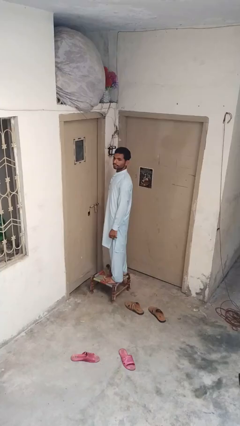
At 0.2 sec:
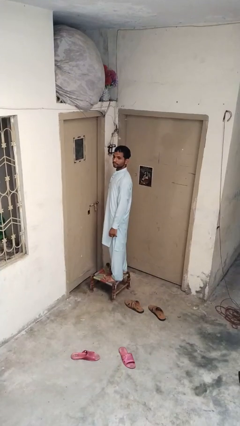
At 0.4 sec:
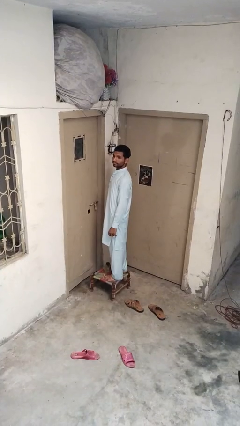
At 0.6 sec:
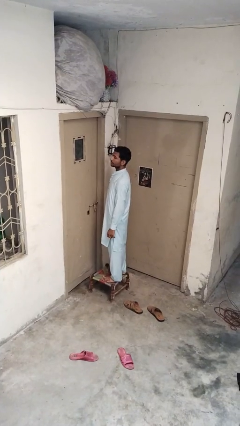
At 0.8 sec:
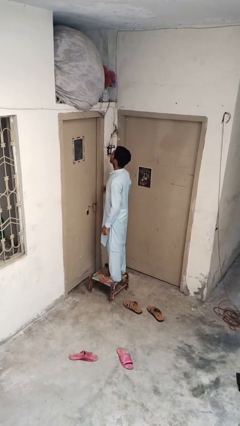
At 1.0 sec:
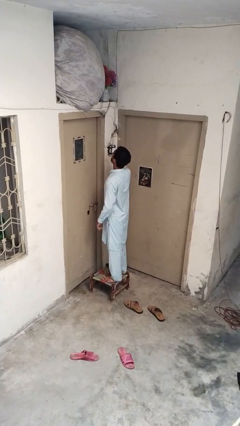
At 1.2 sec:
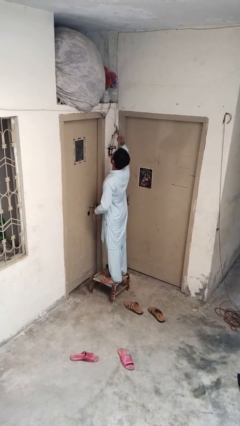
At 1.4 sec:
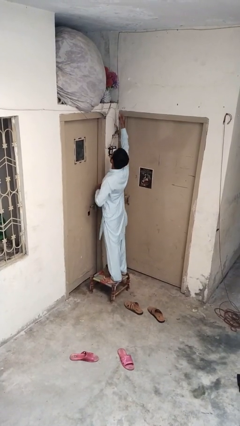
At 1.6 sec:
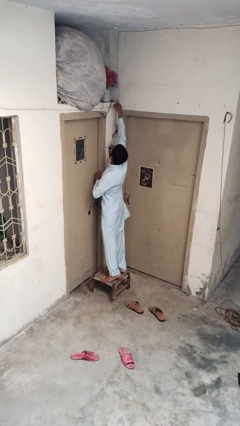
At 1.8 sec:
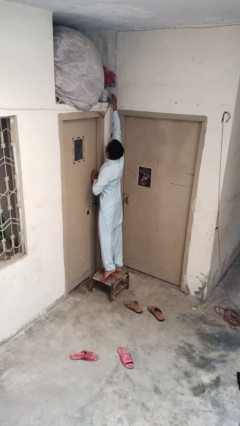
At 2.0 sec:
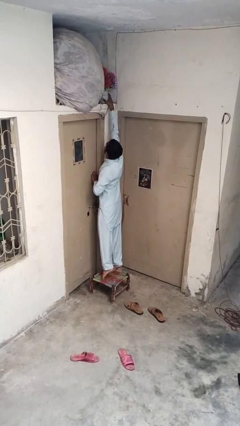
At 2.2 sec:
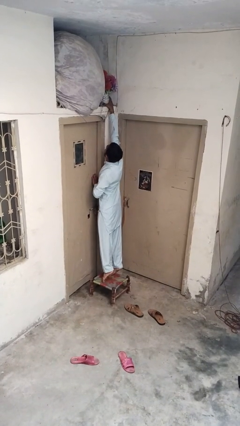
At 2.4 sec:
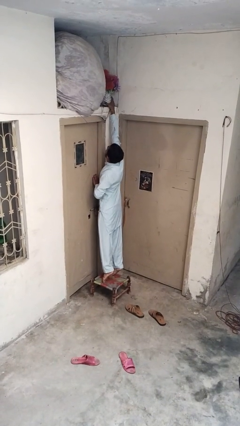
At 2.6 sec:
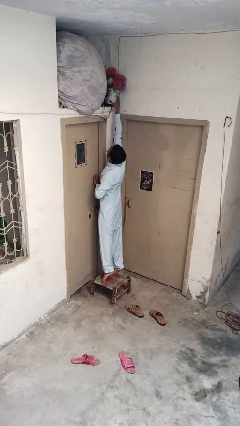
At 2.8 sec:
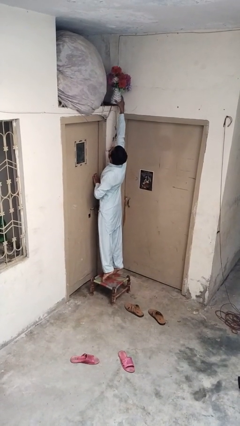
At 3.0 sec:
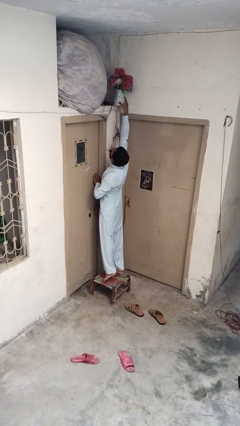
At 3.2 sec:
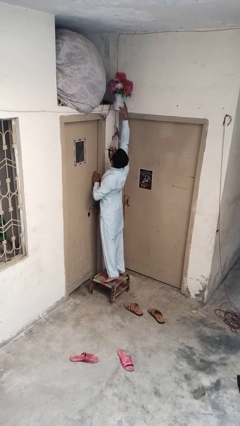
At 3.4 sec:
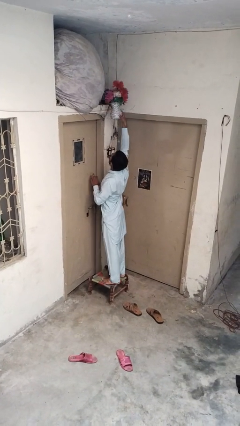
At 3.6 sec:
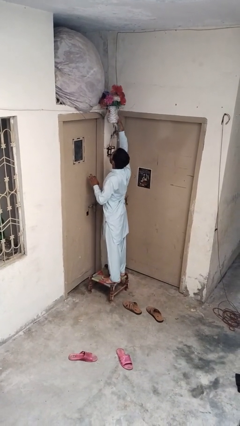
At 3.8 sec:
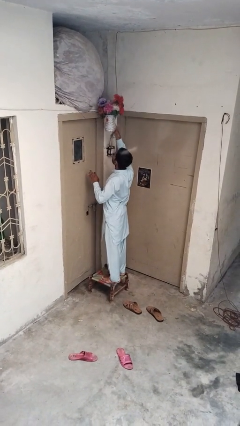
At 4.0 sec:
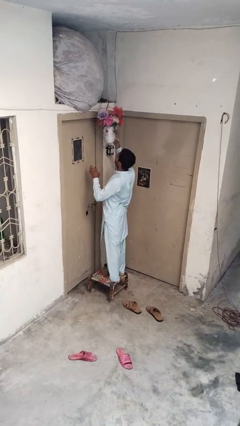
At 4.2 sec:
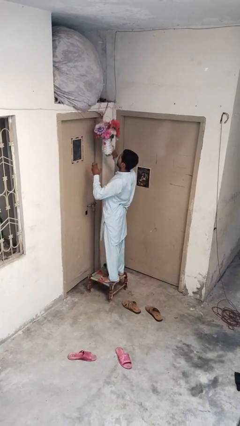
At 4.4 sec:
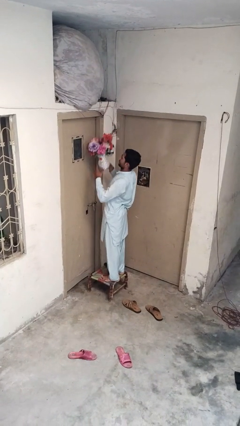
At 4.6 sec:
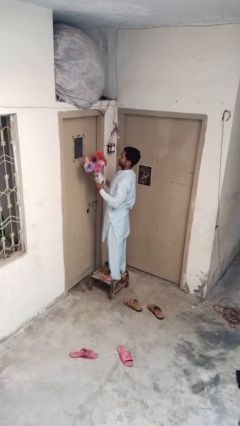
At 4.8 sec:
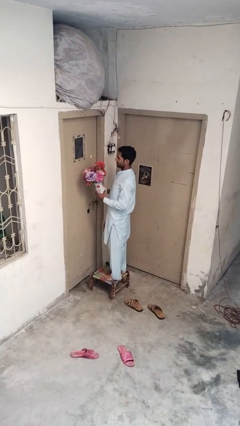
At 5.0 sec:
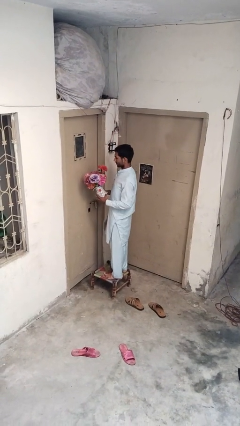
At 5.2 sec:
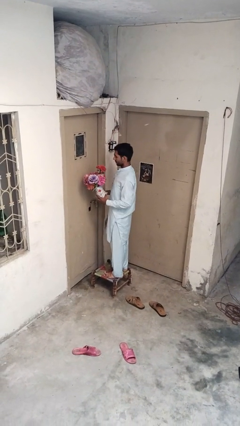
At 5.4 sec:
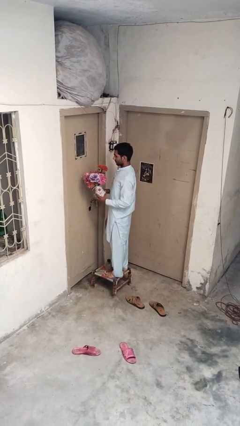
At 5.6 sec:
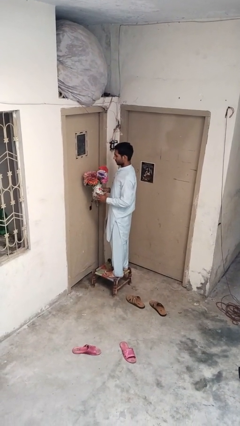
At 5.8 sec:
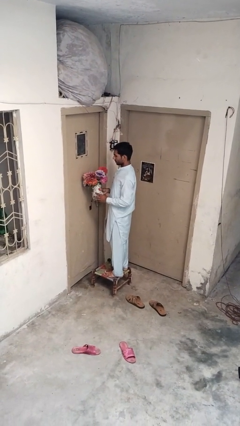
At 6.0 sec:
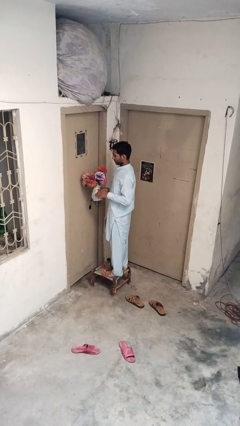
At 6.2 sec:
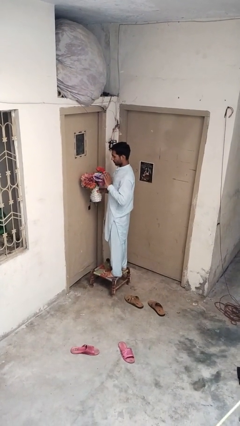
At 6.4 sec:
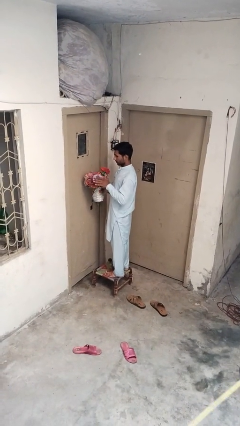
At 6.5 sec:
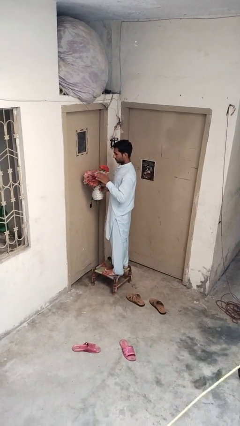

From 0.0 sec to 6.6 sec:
person picks up object from shelf

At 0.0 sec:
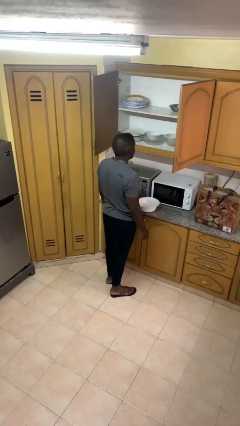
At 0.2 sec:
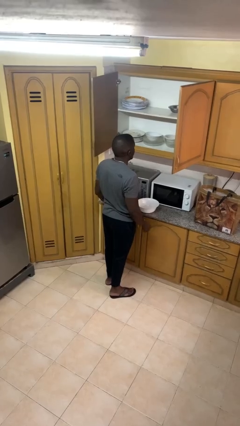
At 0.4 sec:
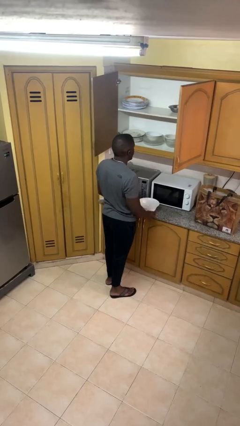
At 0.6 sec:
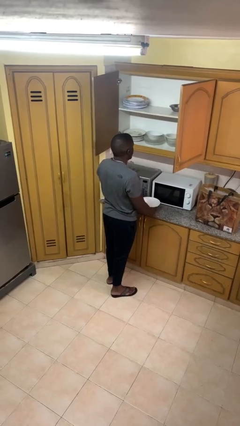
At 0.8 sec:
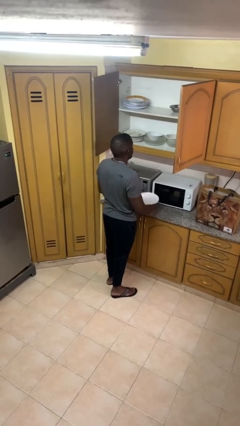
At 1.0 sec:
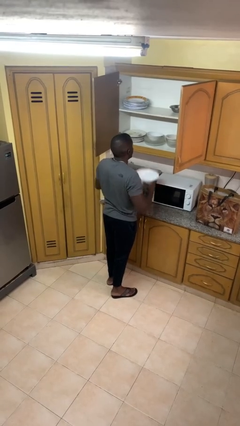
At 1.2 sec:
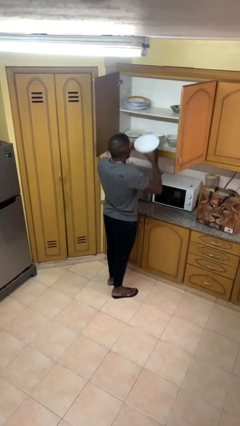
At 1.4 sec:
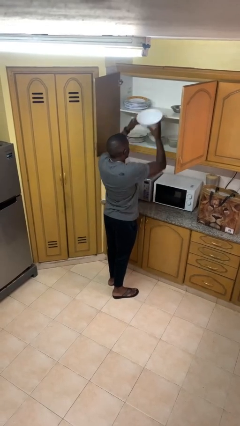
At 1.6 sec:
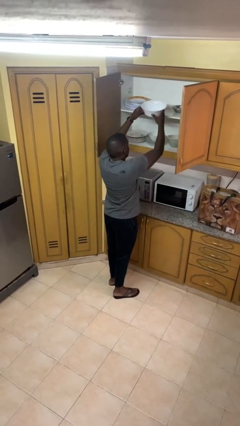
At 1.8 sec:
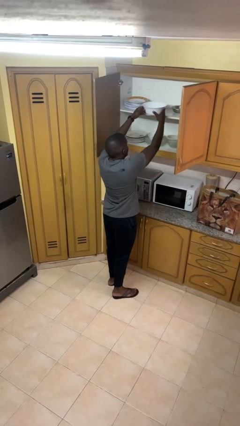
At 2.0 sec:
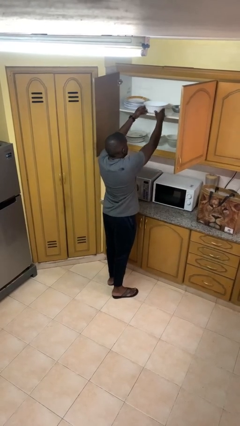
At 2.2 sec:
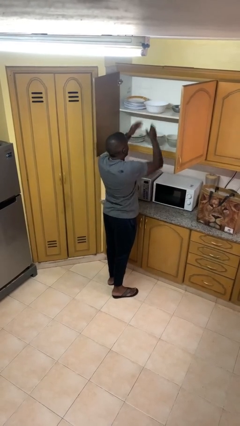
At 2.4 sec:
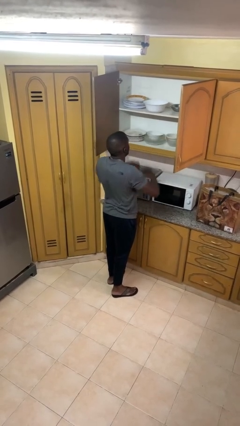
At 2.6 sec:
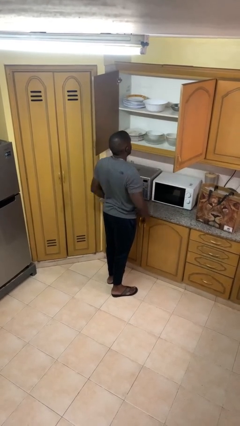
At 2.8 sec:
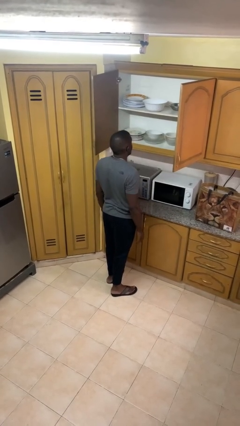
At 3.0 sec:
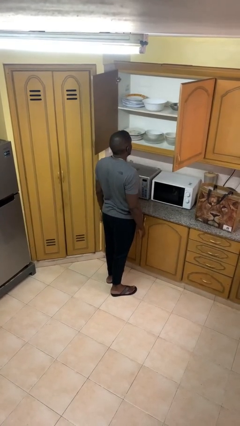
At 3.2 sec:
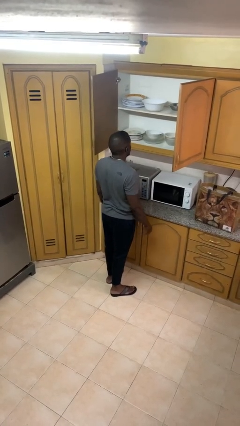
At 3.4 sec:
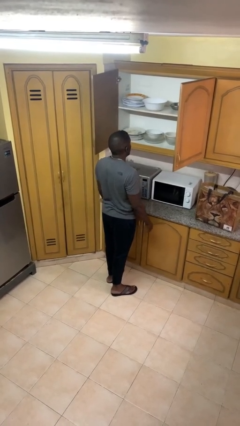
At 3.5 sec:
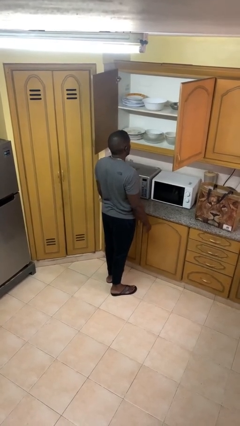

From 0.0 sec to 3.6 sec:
person puts object in cabinet

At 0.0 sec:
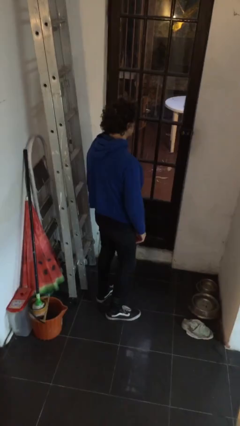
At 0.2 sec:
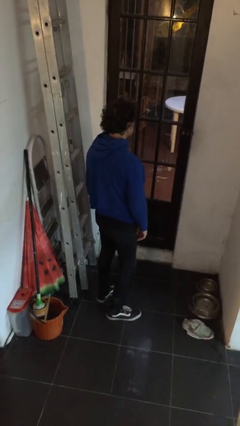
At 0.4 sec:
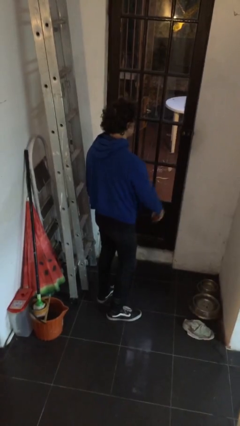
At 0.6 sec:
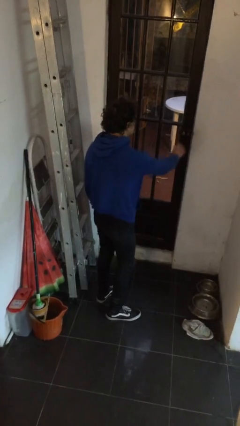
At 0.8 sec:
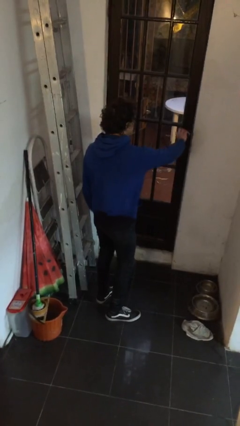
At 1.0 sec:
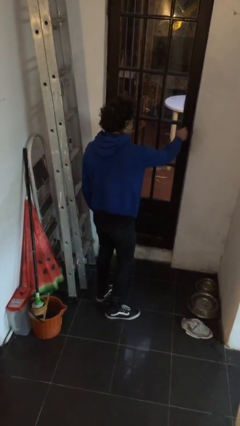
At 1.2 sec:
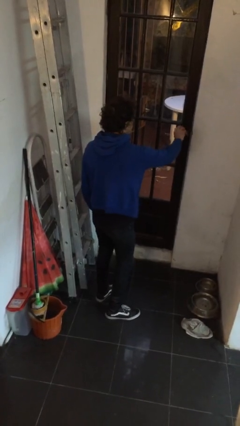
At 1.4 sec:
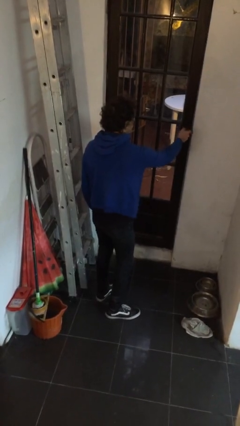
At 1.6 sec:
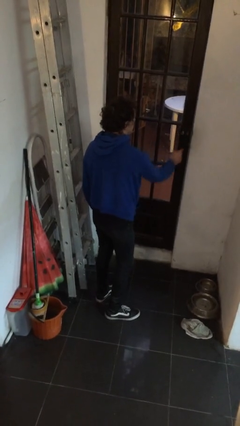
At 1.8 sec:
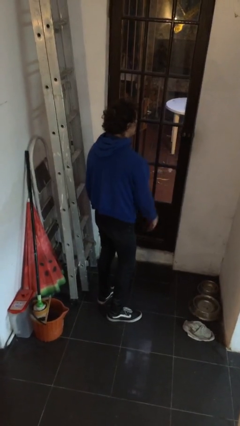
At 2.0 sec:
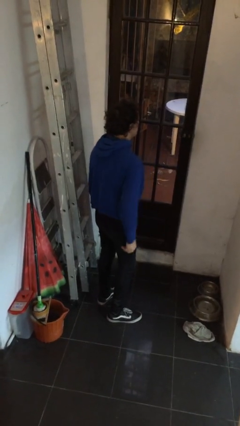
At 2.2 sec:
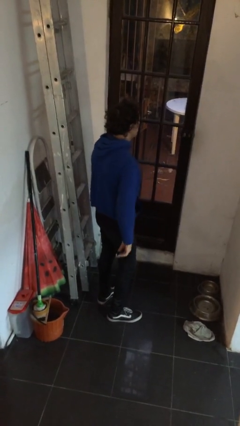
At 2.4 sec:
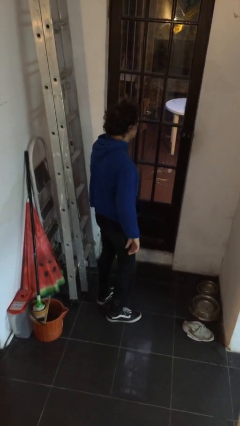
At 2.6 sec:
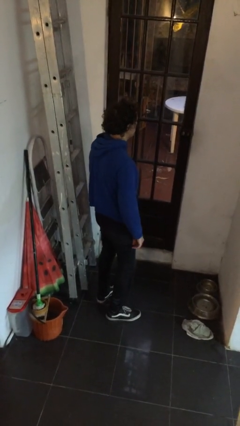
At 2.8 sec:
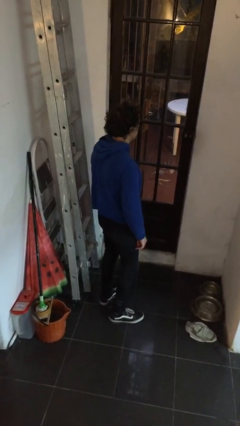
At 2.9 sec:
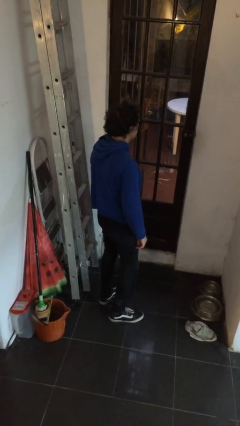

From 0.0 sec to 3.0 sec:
person locks door with keys

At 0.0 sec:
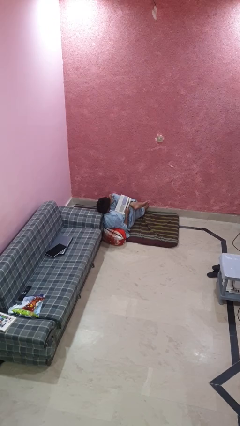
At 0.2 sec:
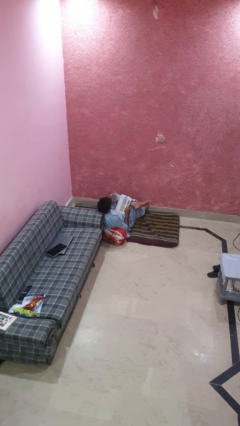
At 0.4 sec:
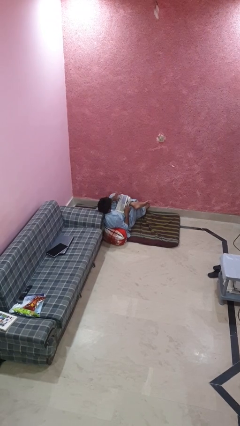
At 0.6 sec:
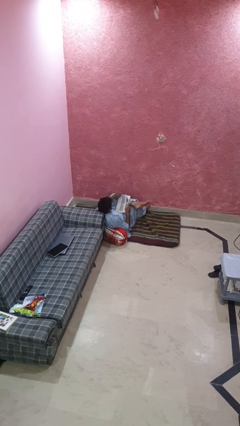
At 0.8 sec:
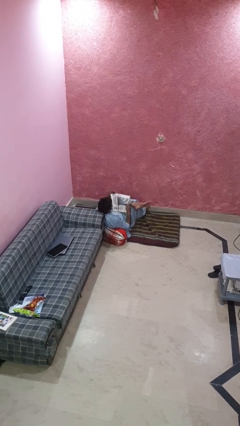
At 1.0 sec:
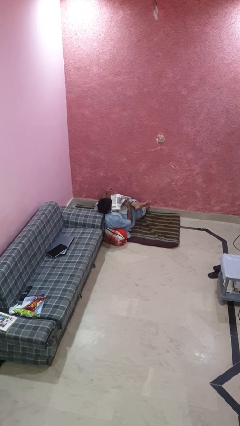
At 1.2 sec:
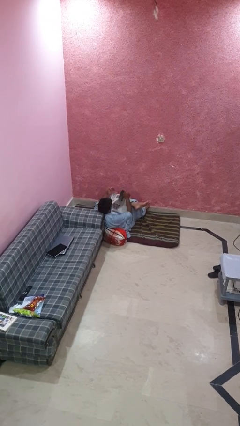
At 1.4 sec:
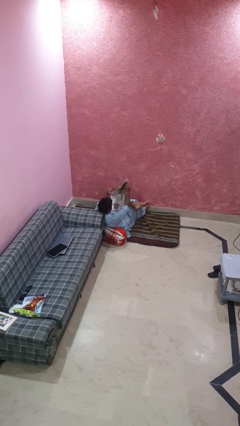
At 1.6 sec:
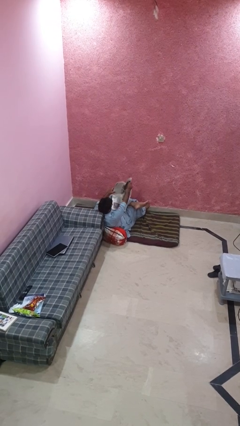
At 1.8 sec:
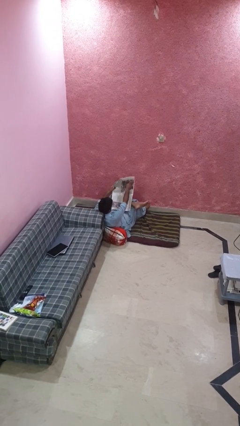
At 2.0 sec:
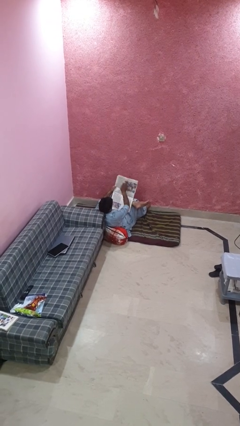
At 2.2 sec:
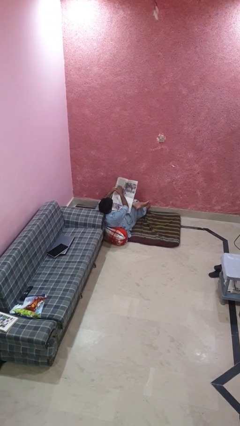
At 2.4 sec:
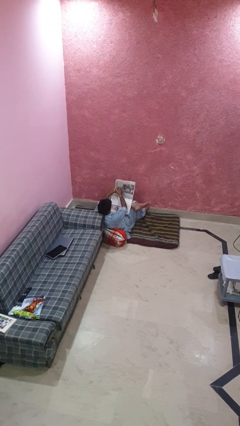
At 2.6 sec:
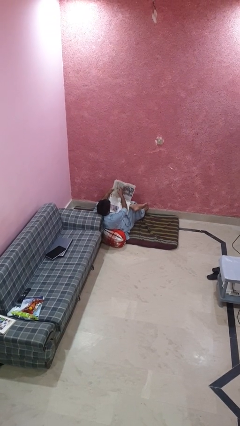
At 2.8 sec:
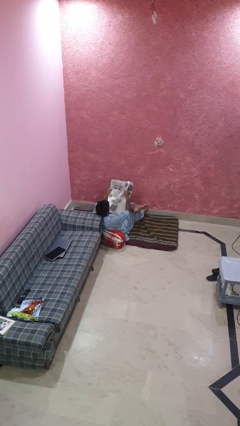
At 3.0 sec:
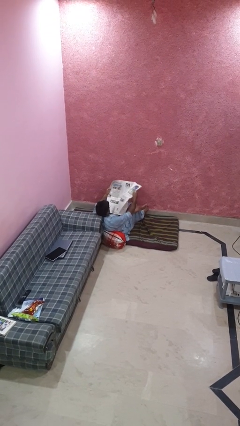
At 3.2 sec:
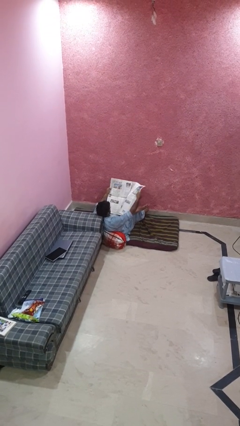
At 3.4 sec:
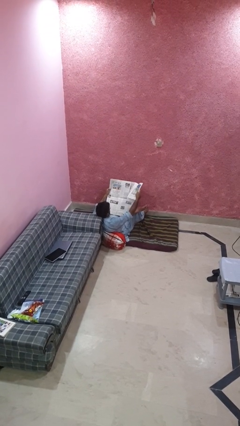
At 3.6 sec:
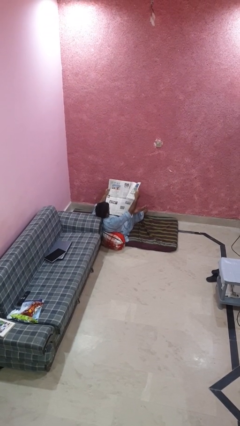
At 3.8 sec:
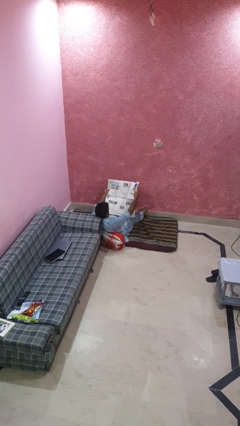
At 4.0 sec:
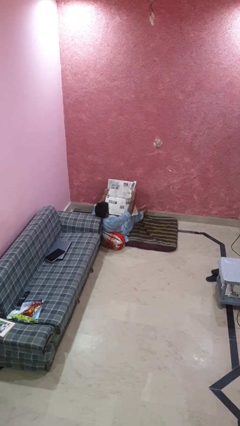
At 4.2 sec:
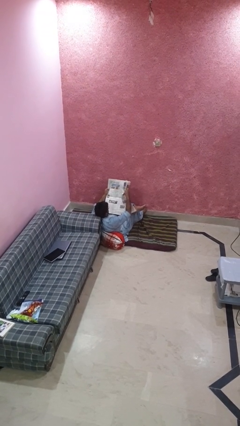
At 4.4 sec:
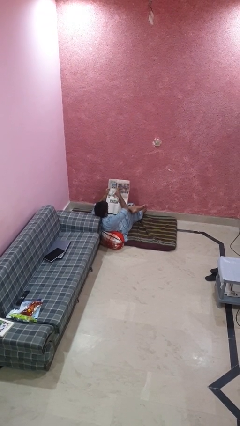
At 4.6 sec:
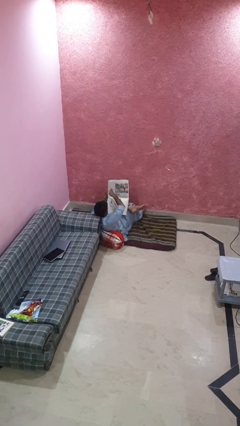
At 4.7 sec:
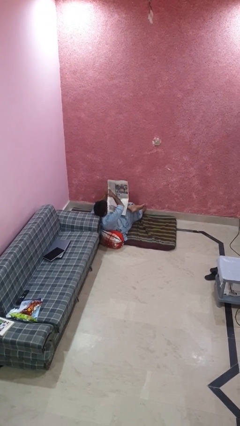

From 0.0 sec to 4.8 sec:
person reads newspaper
